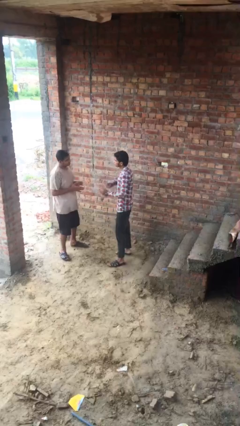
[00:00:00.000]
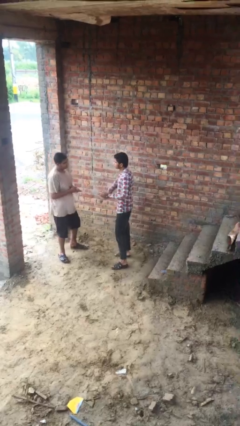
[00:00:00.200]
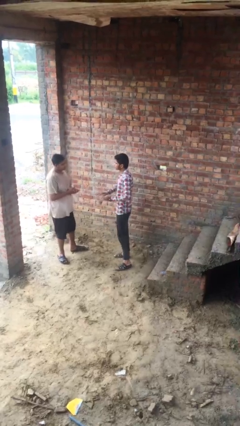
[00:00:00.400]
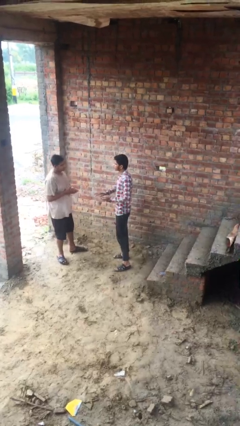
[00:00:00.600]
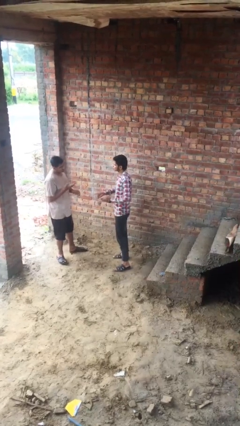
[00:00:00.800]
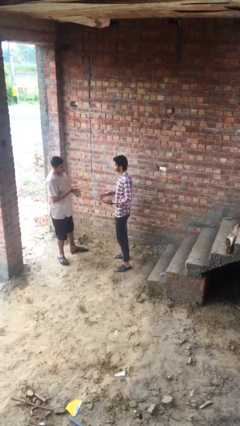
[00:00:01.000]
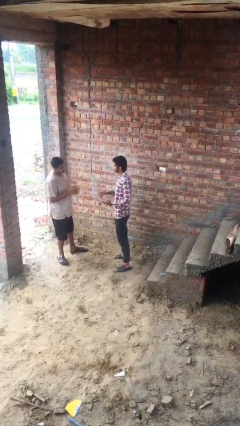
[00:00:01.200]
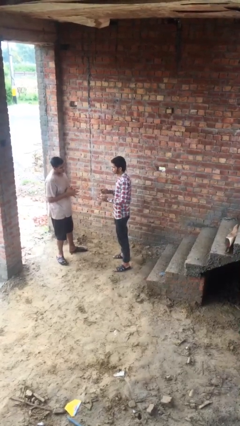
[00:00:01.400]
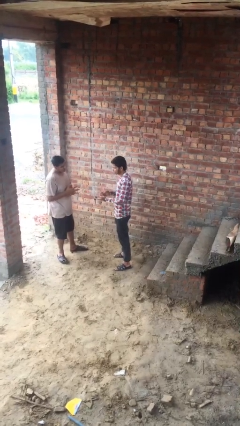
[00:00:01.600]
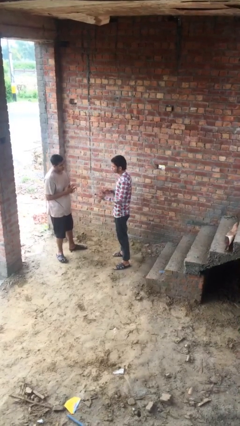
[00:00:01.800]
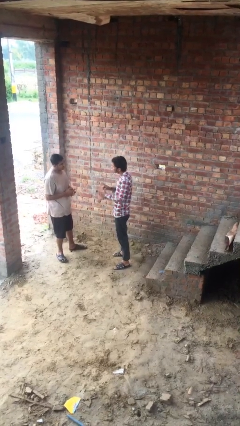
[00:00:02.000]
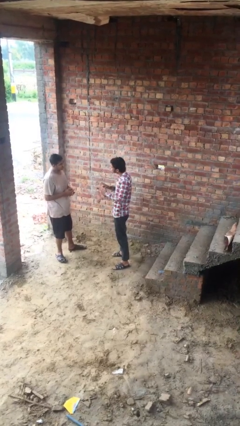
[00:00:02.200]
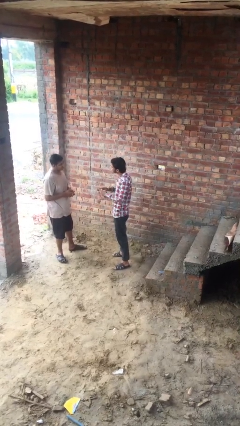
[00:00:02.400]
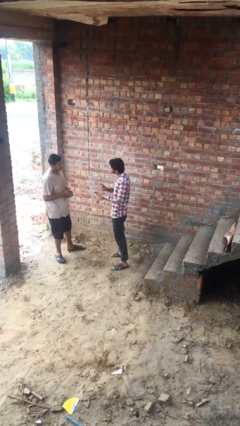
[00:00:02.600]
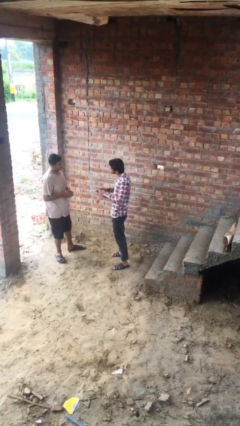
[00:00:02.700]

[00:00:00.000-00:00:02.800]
person talks to person

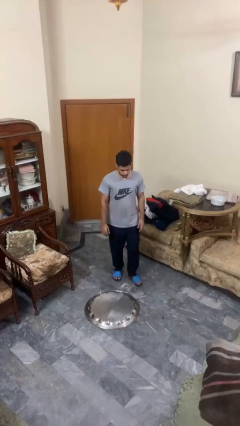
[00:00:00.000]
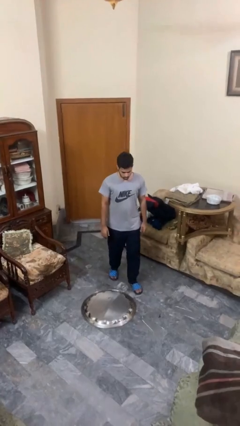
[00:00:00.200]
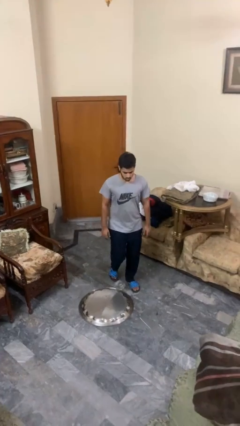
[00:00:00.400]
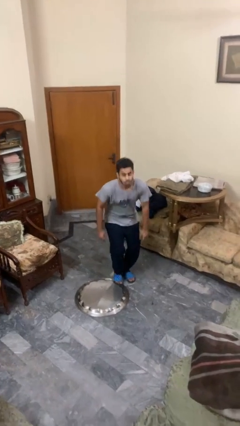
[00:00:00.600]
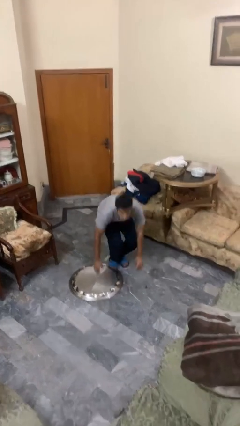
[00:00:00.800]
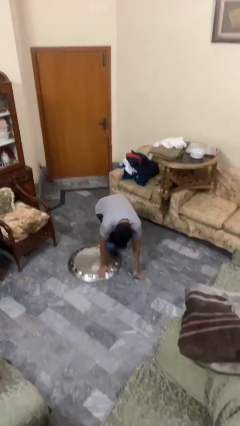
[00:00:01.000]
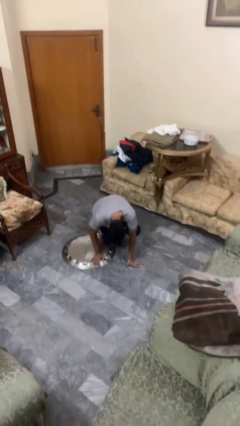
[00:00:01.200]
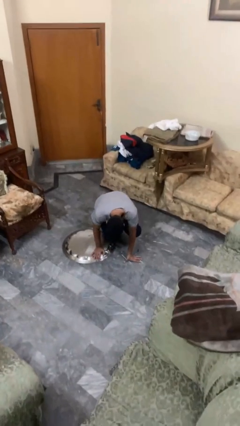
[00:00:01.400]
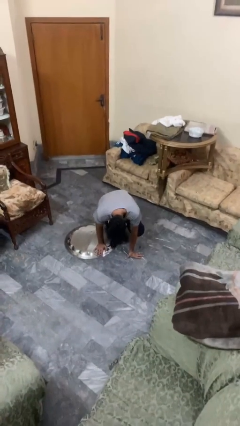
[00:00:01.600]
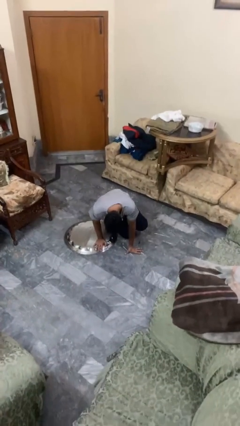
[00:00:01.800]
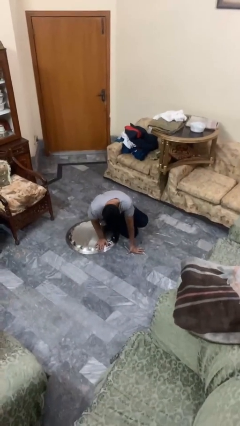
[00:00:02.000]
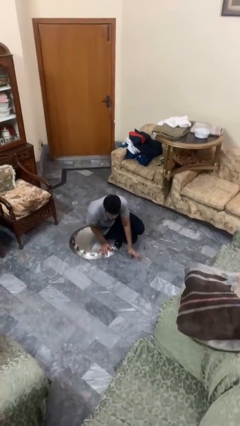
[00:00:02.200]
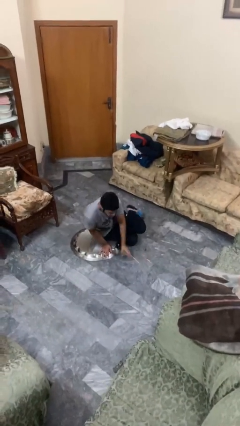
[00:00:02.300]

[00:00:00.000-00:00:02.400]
person trips on object on floor

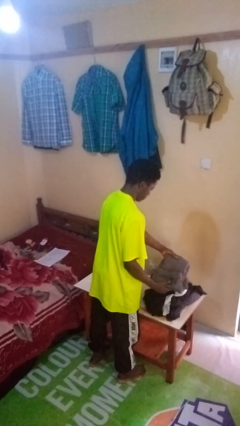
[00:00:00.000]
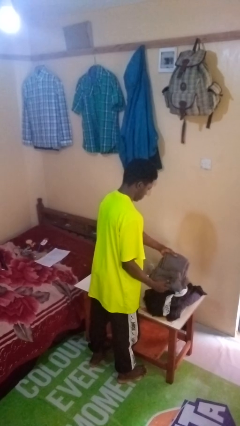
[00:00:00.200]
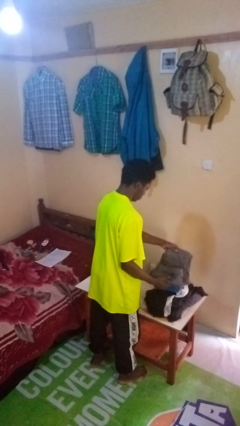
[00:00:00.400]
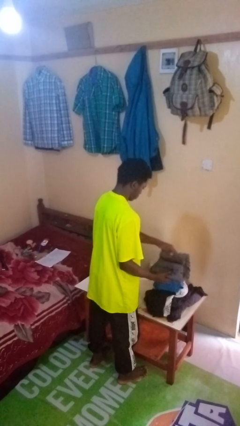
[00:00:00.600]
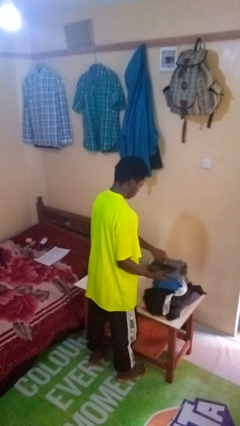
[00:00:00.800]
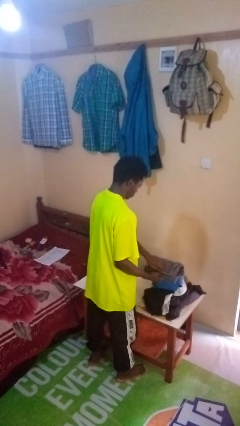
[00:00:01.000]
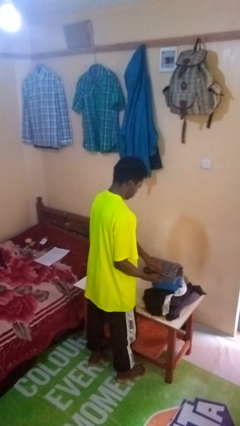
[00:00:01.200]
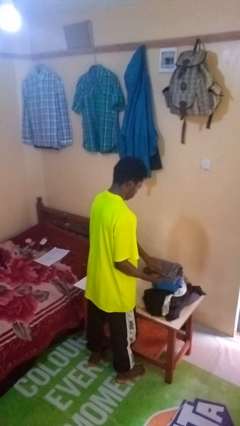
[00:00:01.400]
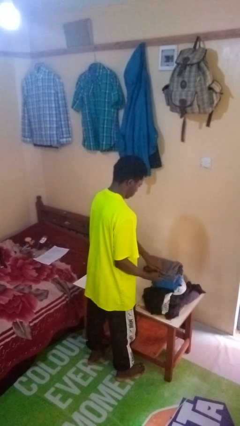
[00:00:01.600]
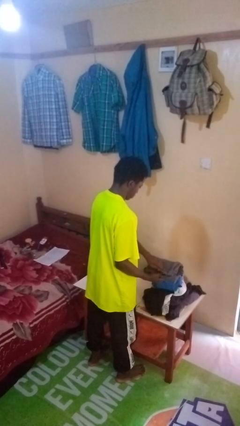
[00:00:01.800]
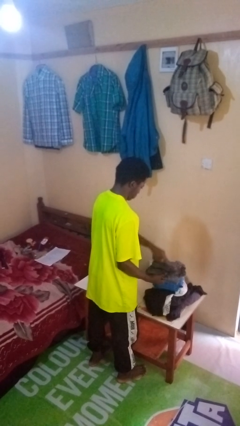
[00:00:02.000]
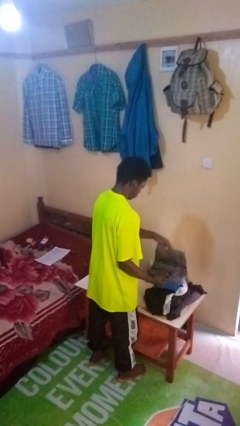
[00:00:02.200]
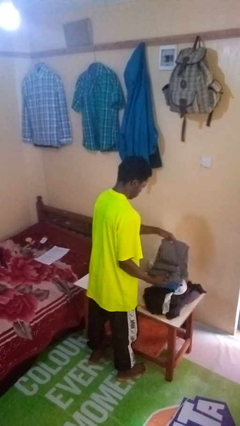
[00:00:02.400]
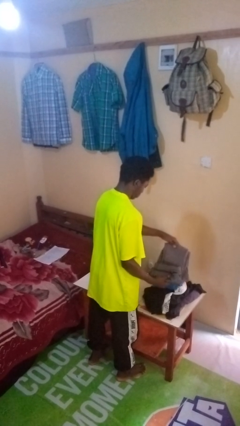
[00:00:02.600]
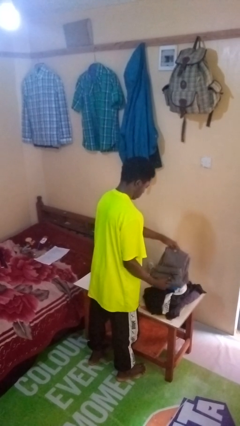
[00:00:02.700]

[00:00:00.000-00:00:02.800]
person folds pants

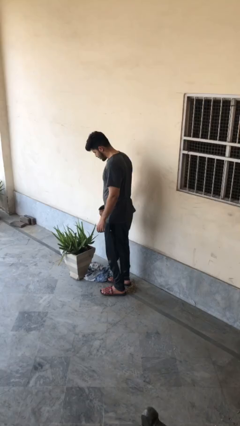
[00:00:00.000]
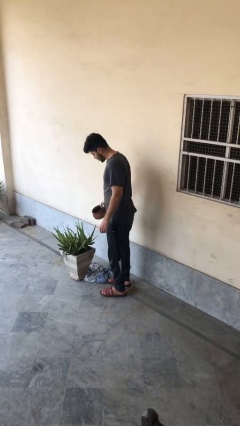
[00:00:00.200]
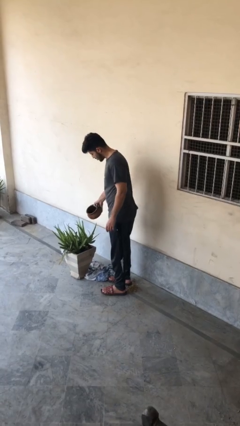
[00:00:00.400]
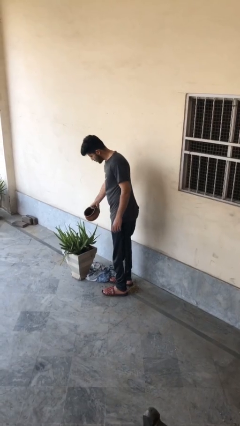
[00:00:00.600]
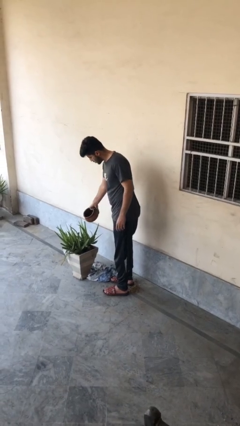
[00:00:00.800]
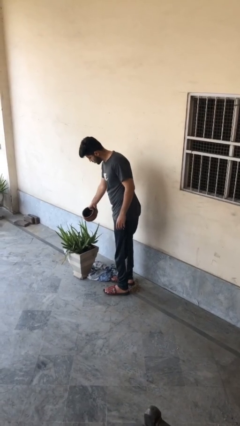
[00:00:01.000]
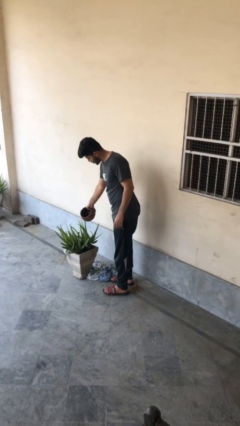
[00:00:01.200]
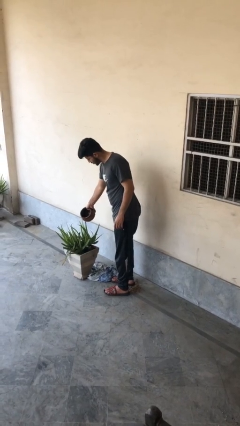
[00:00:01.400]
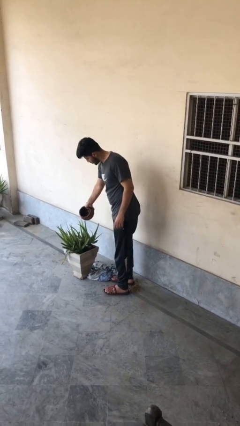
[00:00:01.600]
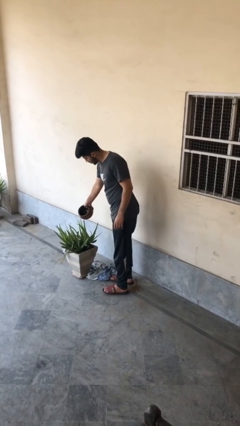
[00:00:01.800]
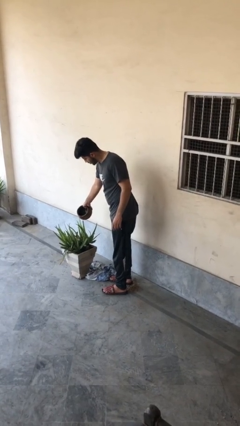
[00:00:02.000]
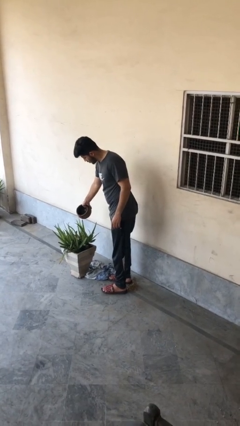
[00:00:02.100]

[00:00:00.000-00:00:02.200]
person waters houseplant

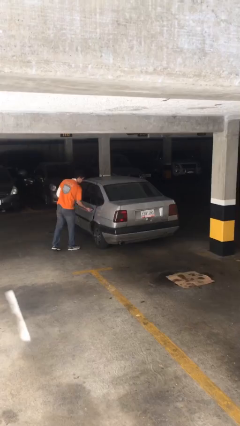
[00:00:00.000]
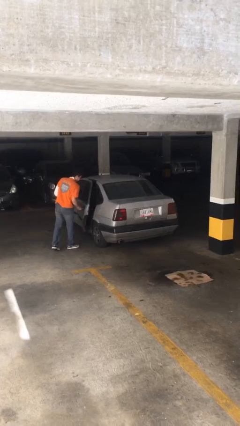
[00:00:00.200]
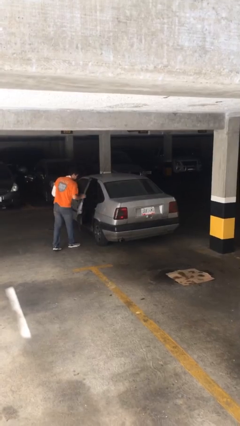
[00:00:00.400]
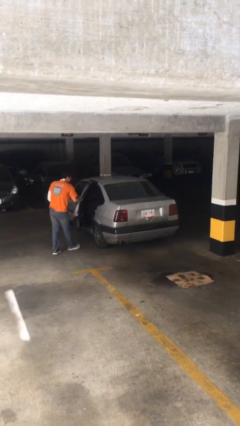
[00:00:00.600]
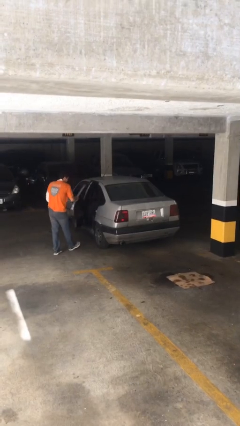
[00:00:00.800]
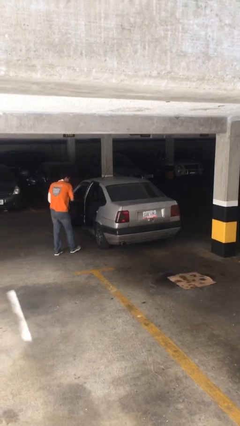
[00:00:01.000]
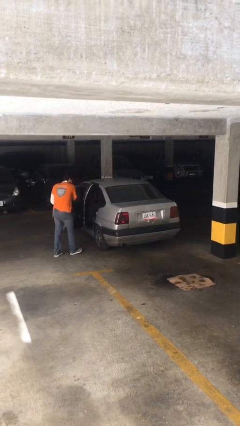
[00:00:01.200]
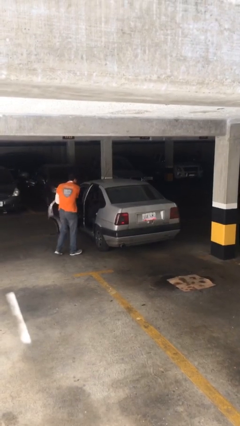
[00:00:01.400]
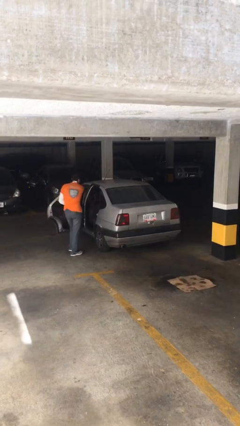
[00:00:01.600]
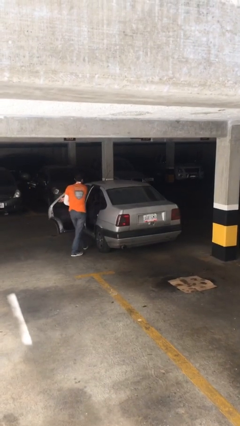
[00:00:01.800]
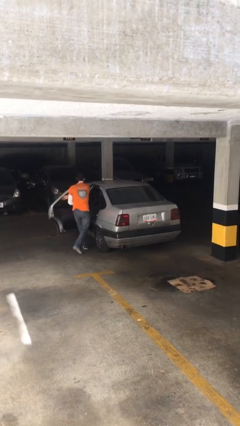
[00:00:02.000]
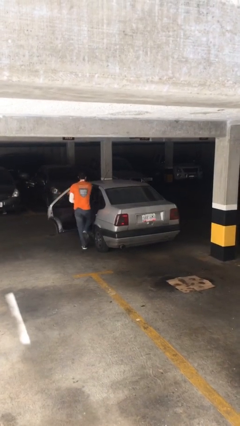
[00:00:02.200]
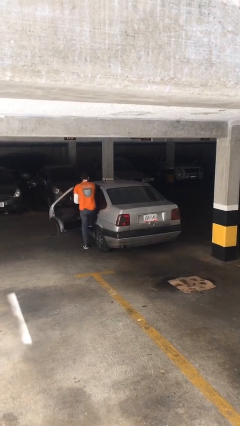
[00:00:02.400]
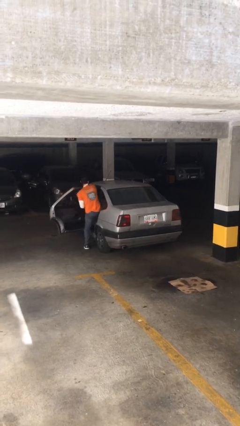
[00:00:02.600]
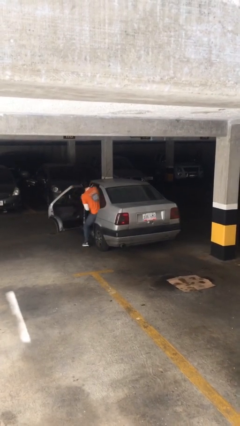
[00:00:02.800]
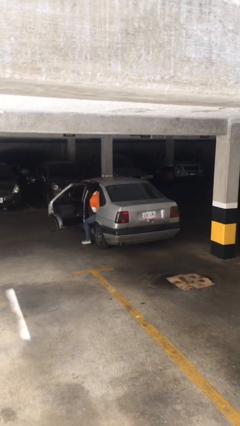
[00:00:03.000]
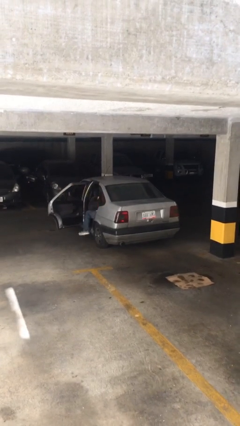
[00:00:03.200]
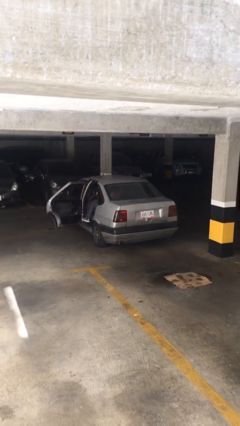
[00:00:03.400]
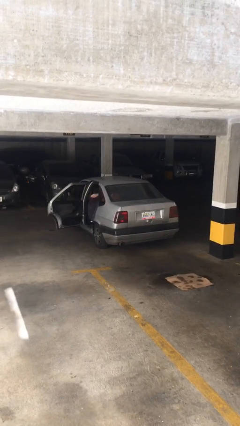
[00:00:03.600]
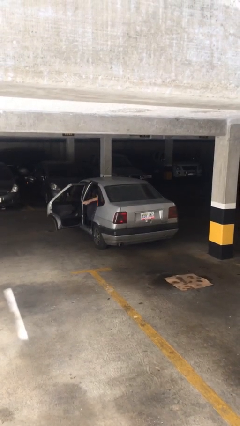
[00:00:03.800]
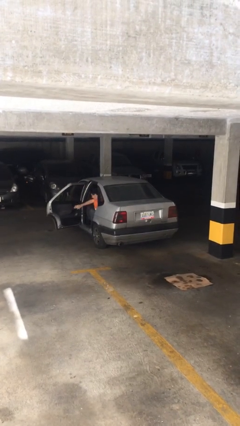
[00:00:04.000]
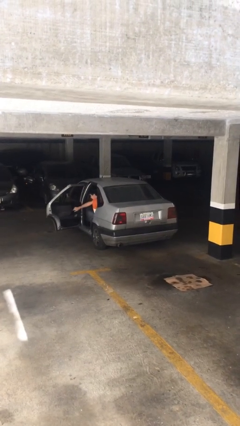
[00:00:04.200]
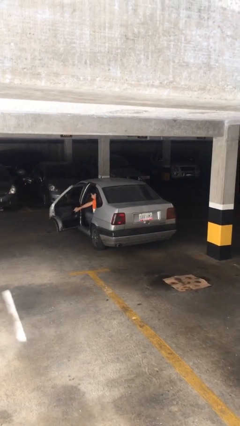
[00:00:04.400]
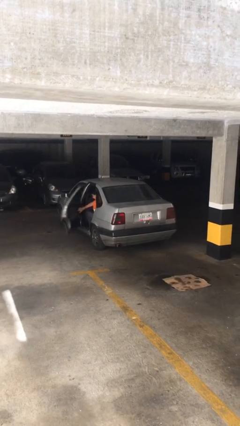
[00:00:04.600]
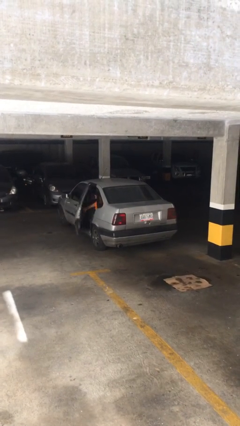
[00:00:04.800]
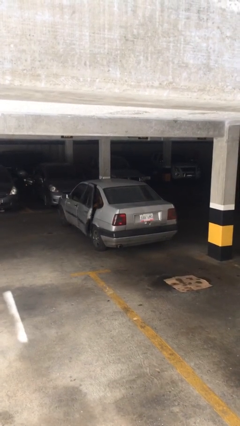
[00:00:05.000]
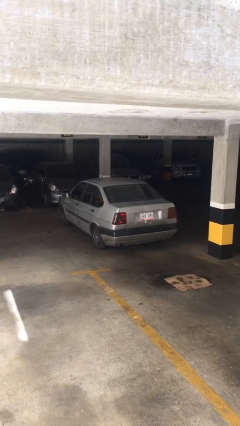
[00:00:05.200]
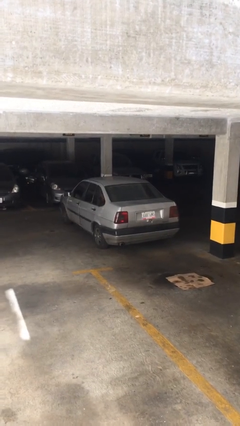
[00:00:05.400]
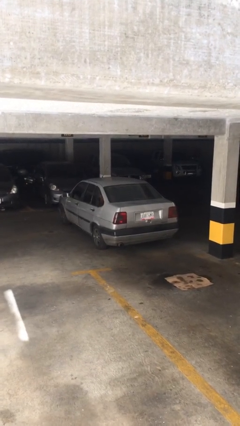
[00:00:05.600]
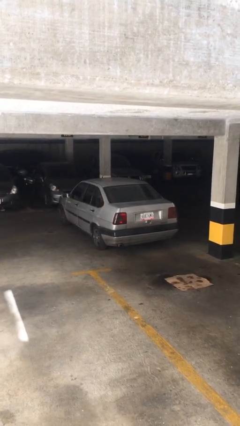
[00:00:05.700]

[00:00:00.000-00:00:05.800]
car picks up person

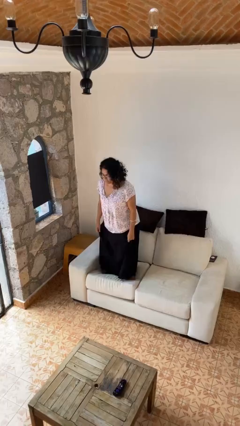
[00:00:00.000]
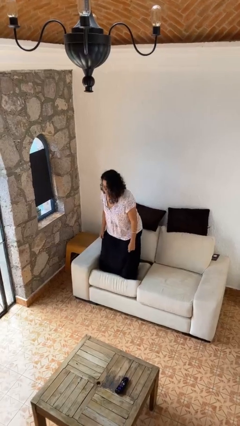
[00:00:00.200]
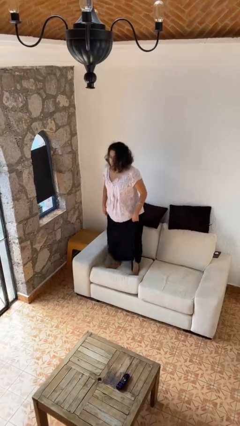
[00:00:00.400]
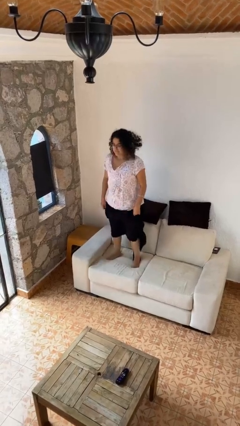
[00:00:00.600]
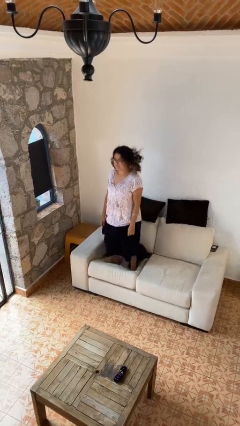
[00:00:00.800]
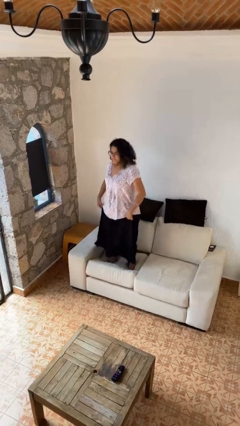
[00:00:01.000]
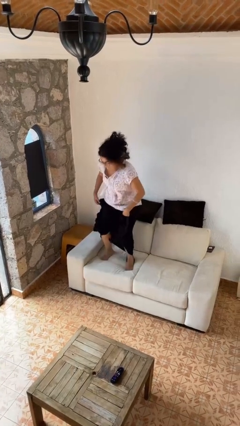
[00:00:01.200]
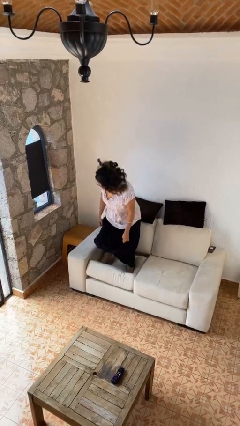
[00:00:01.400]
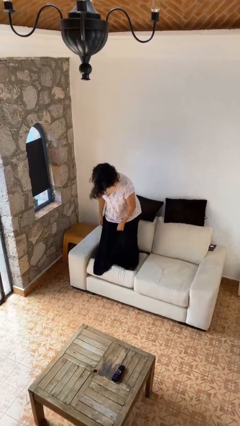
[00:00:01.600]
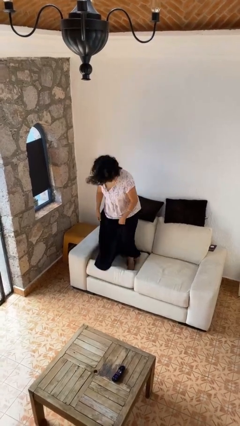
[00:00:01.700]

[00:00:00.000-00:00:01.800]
person jumps on couch
